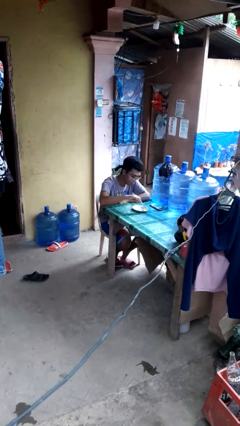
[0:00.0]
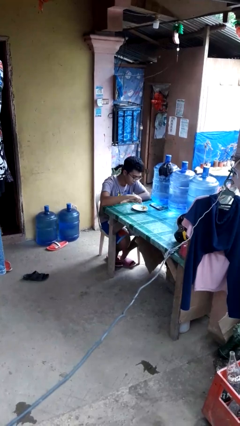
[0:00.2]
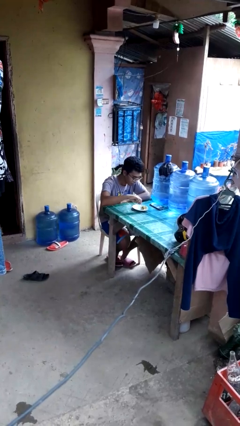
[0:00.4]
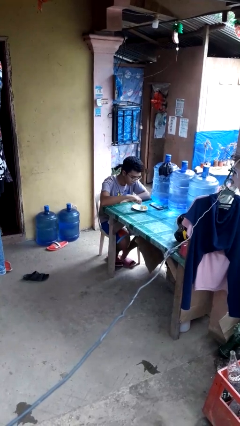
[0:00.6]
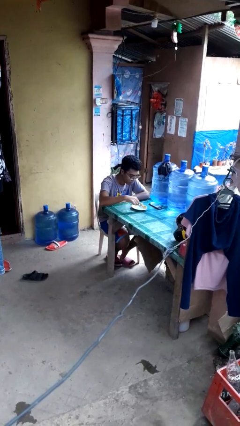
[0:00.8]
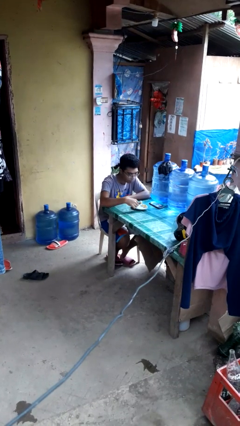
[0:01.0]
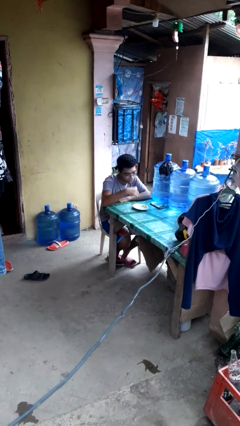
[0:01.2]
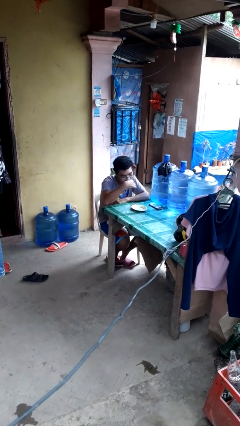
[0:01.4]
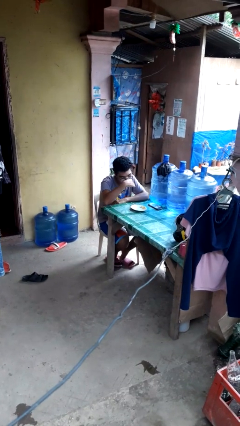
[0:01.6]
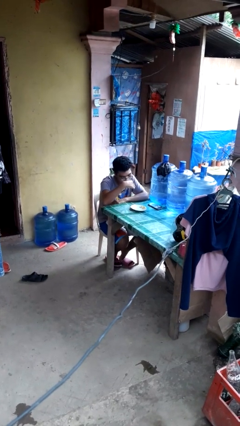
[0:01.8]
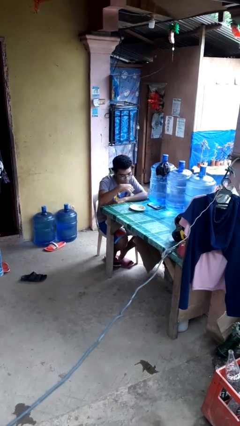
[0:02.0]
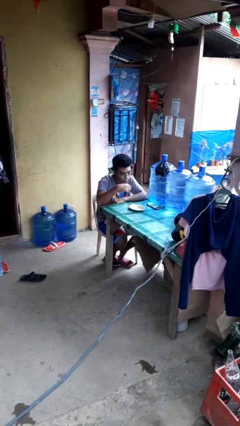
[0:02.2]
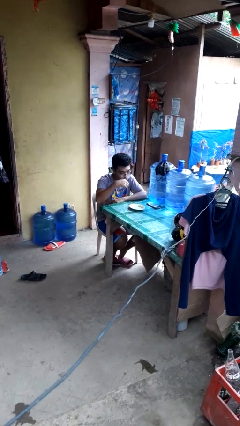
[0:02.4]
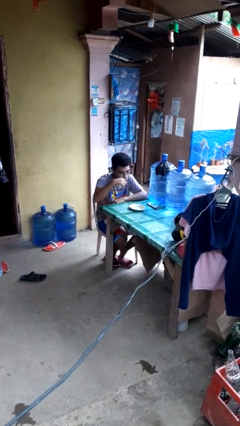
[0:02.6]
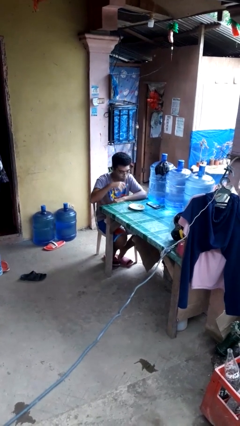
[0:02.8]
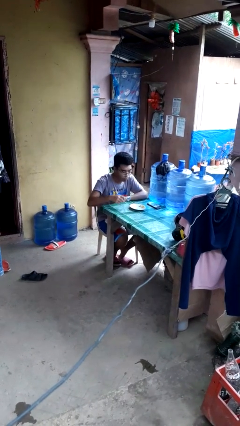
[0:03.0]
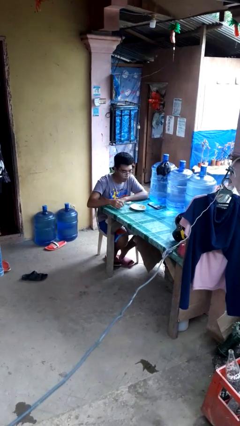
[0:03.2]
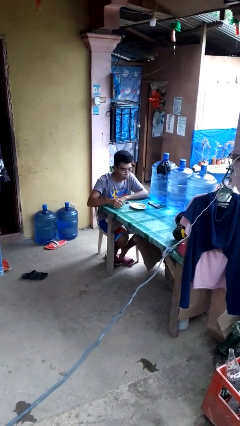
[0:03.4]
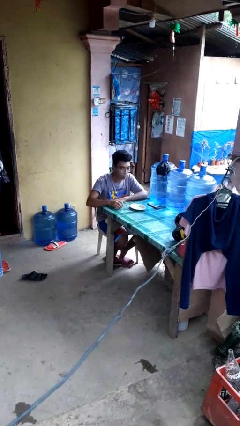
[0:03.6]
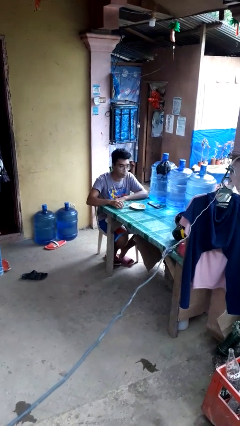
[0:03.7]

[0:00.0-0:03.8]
person eats with utensil

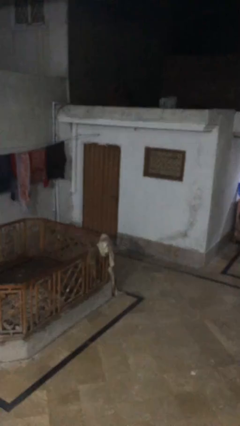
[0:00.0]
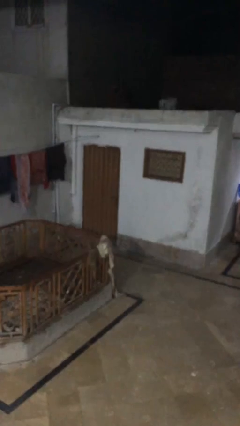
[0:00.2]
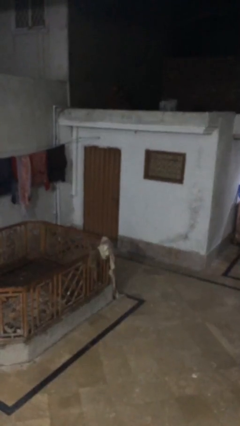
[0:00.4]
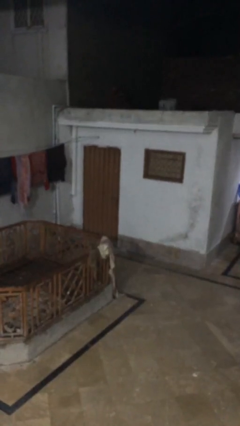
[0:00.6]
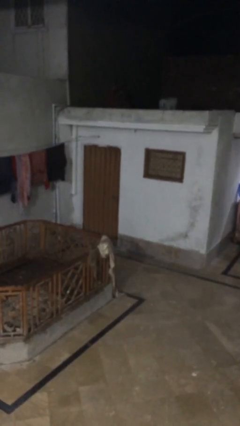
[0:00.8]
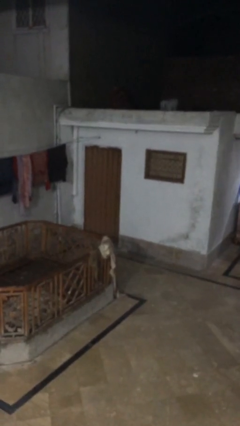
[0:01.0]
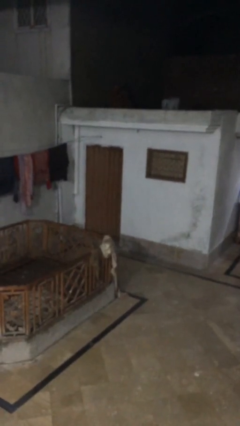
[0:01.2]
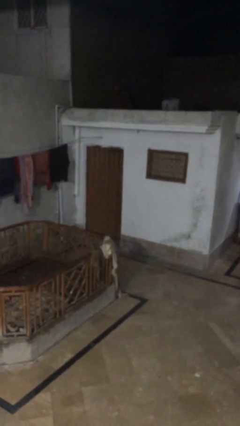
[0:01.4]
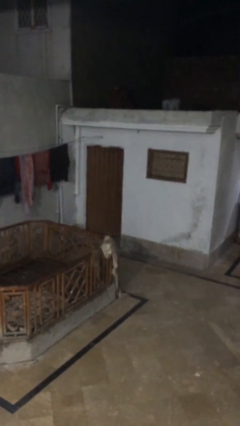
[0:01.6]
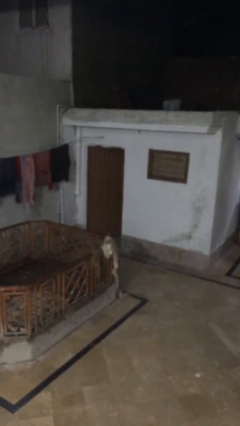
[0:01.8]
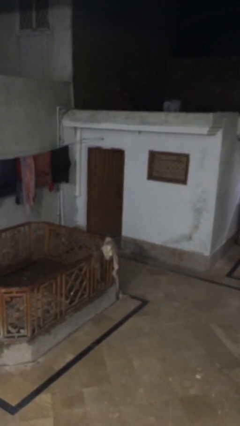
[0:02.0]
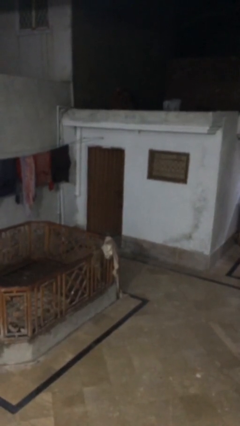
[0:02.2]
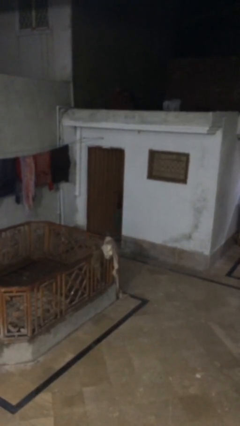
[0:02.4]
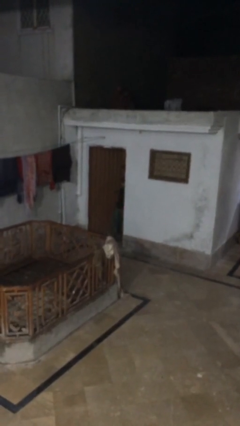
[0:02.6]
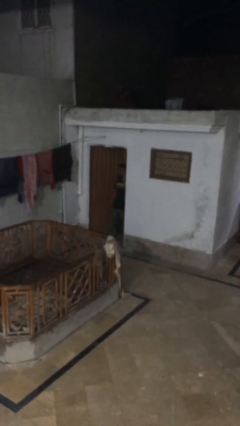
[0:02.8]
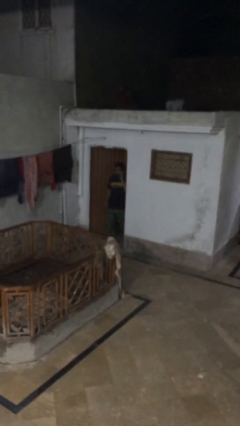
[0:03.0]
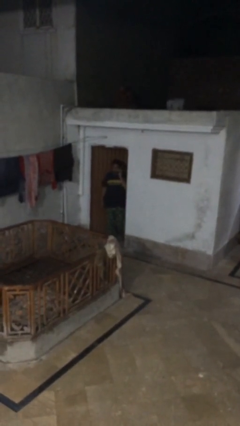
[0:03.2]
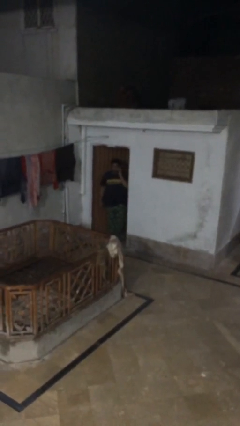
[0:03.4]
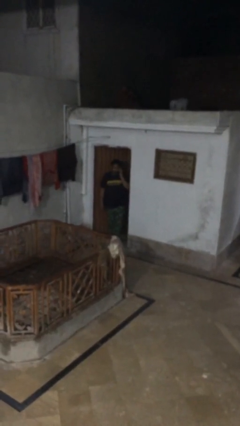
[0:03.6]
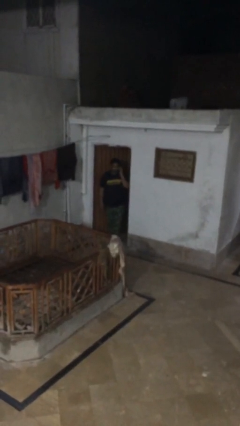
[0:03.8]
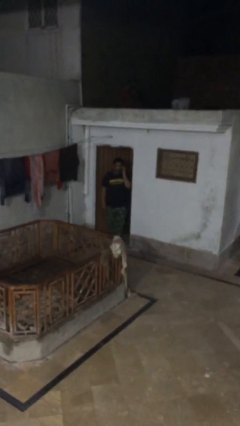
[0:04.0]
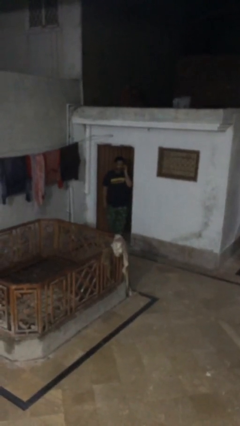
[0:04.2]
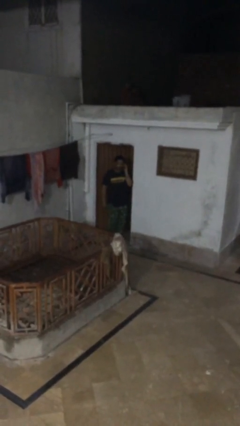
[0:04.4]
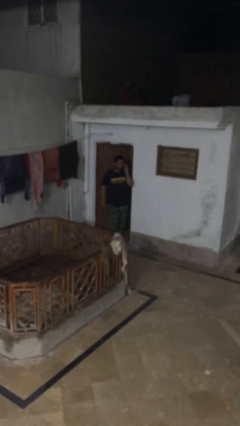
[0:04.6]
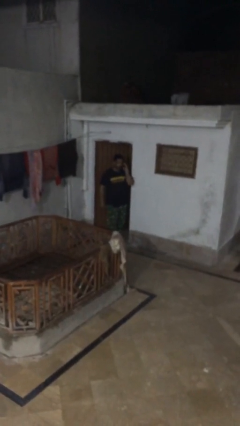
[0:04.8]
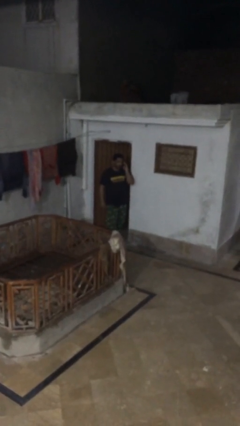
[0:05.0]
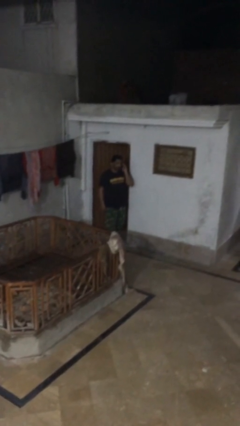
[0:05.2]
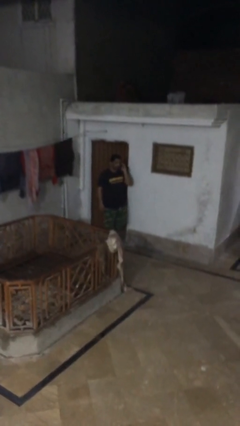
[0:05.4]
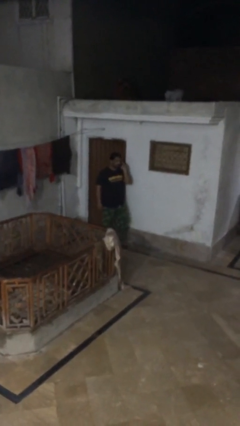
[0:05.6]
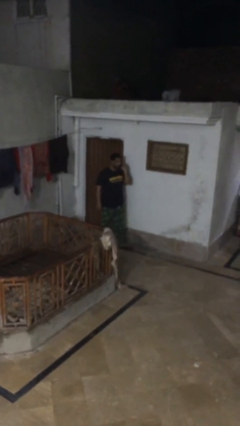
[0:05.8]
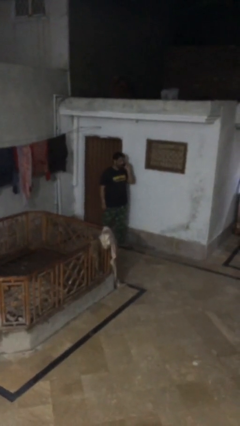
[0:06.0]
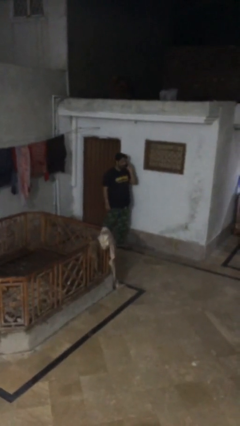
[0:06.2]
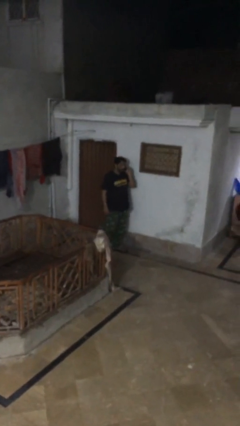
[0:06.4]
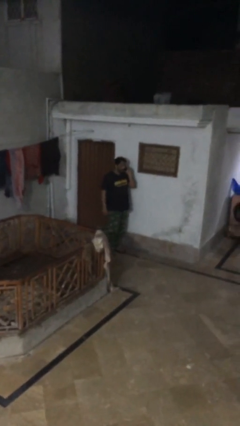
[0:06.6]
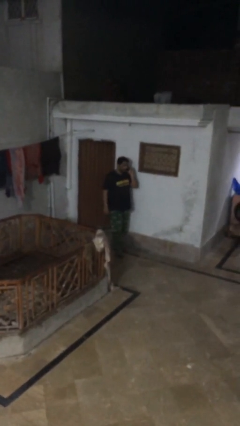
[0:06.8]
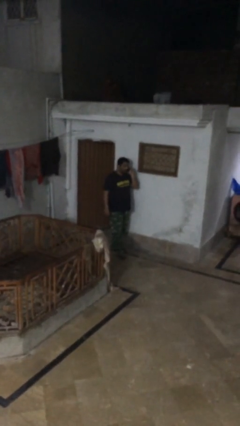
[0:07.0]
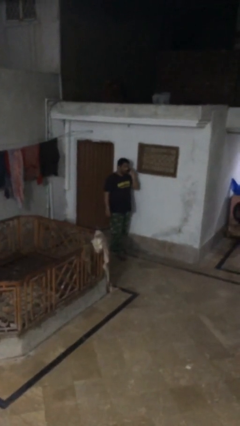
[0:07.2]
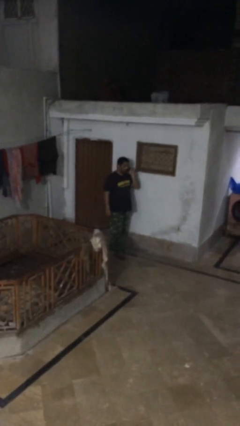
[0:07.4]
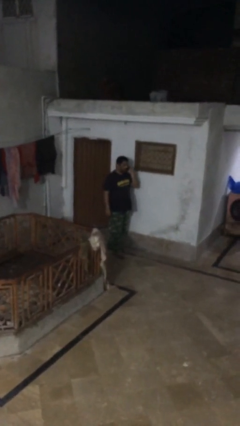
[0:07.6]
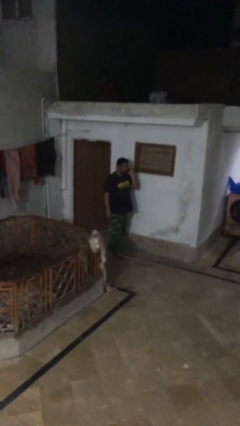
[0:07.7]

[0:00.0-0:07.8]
person enters scene through structure

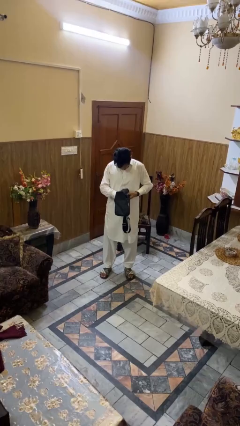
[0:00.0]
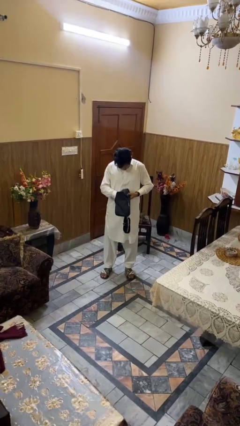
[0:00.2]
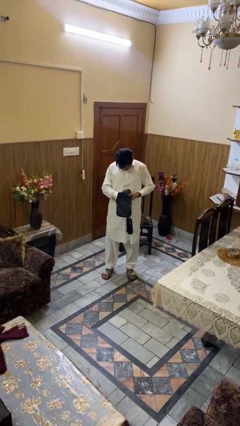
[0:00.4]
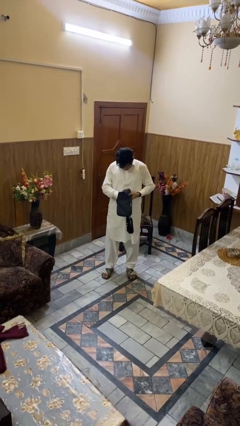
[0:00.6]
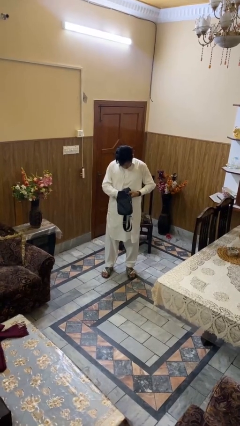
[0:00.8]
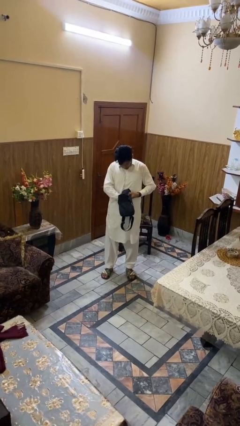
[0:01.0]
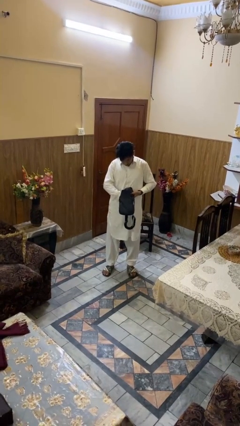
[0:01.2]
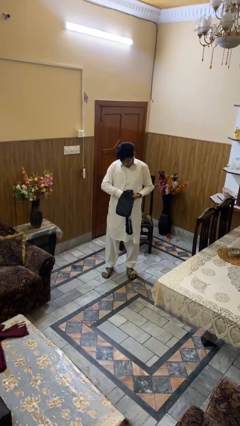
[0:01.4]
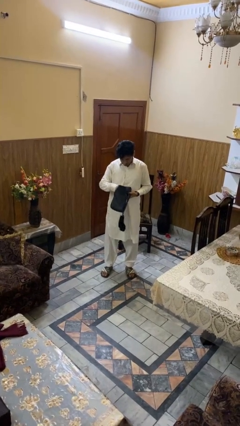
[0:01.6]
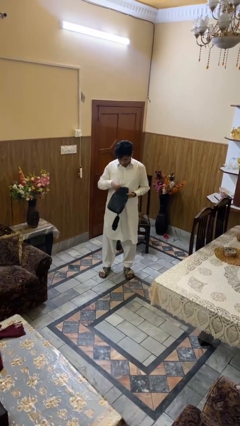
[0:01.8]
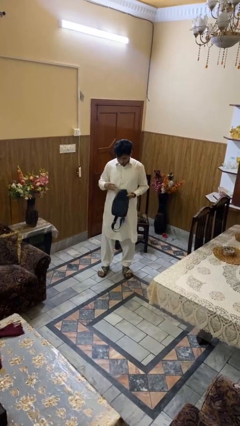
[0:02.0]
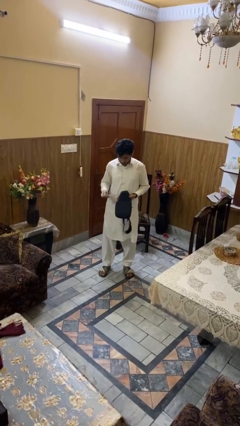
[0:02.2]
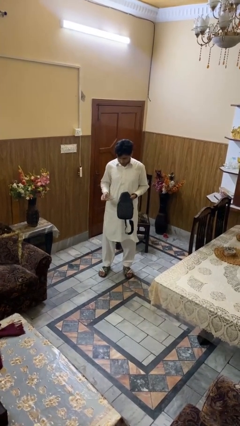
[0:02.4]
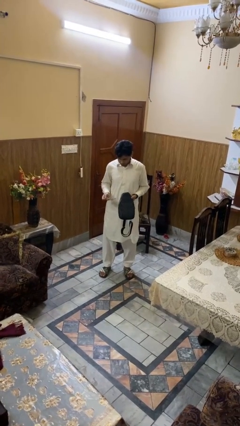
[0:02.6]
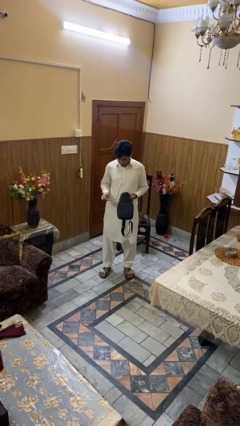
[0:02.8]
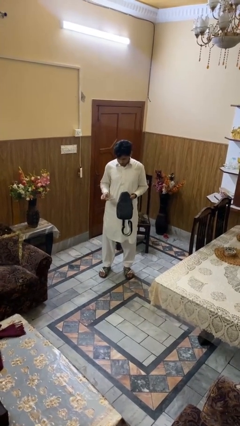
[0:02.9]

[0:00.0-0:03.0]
person takes object from purse

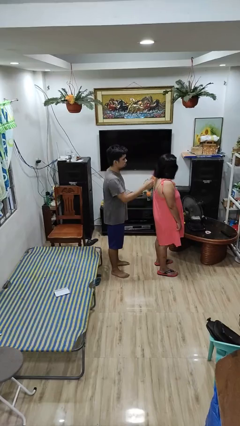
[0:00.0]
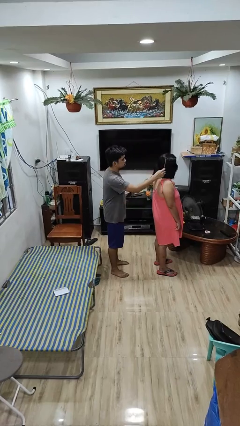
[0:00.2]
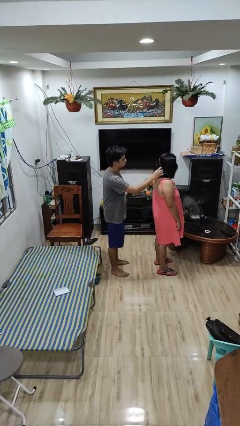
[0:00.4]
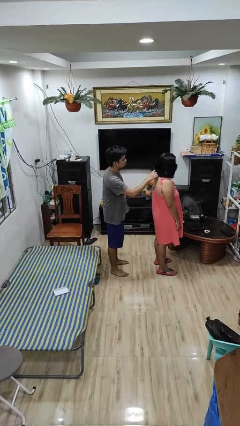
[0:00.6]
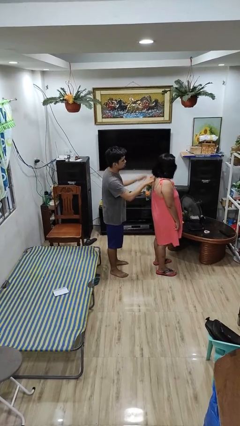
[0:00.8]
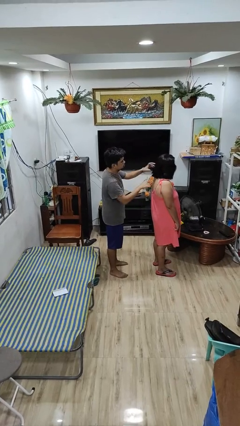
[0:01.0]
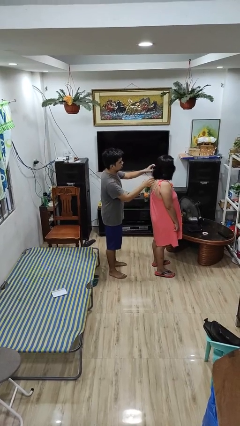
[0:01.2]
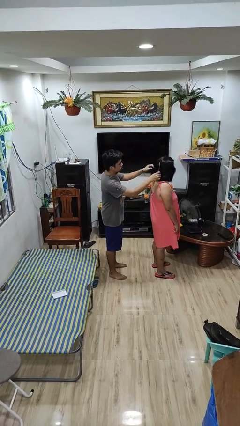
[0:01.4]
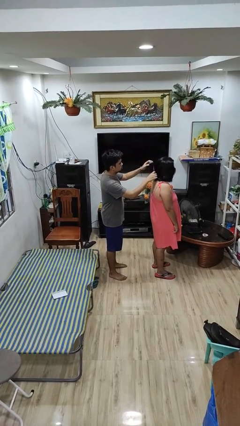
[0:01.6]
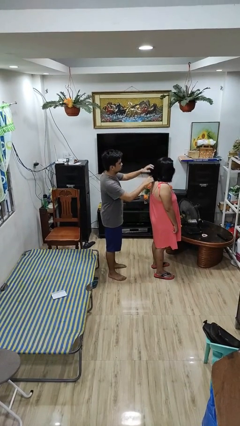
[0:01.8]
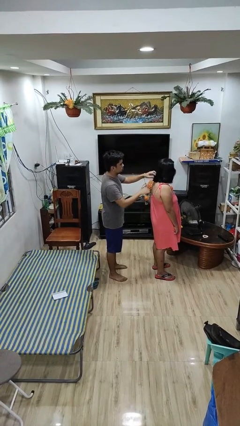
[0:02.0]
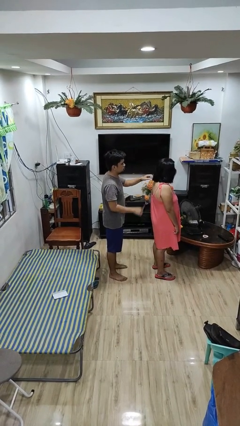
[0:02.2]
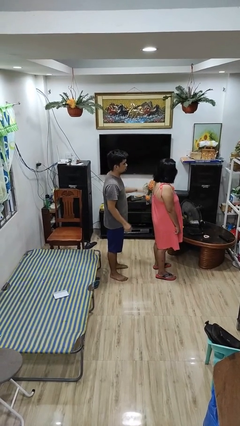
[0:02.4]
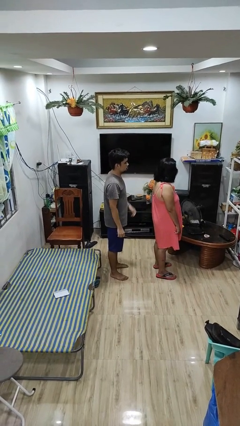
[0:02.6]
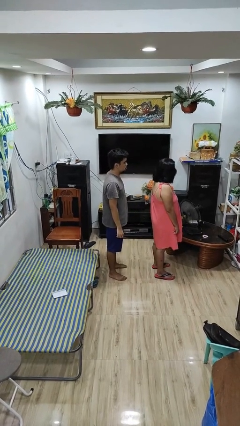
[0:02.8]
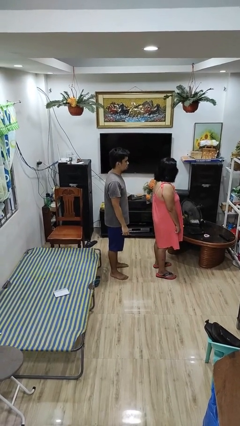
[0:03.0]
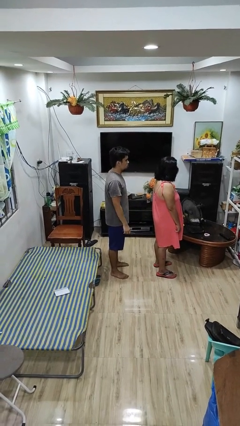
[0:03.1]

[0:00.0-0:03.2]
person brushes hair of person
